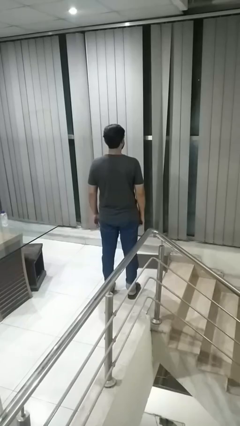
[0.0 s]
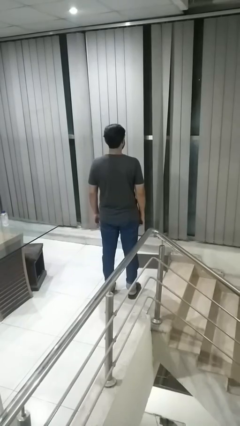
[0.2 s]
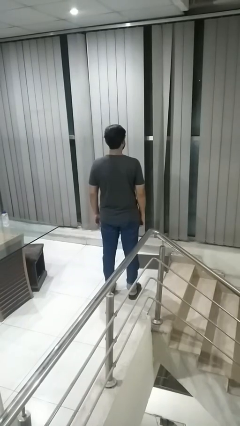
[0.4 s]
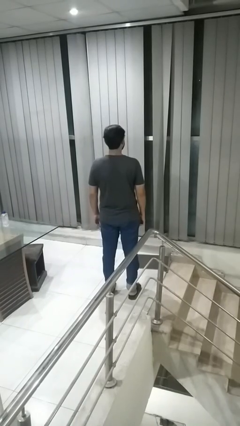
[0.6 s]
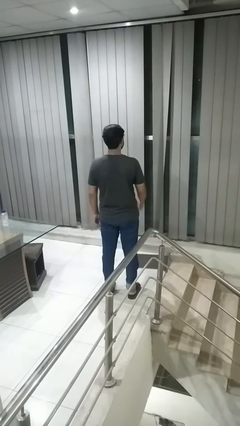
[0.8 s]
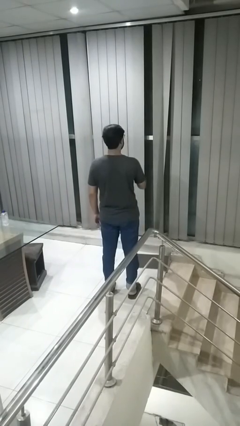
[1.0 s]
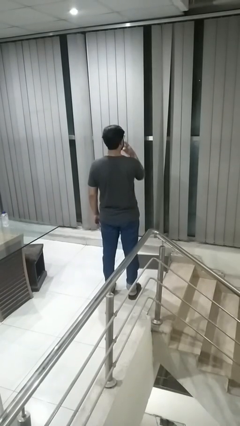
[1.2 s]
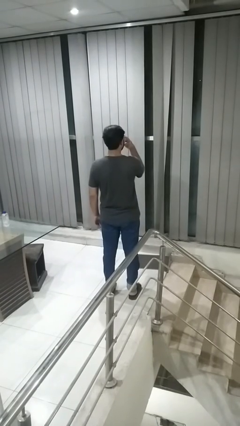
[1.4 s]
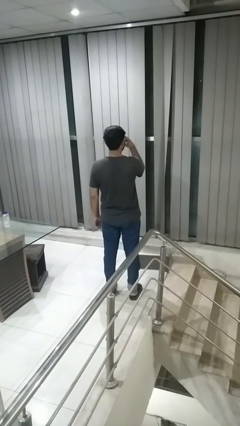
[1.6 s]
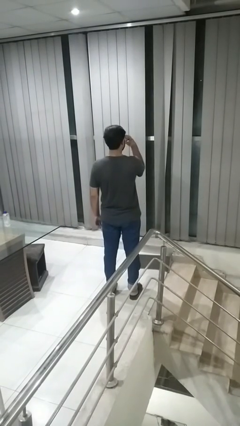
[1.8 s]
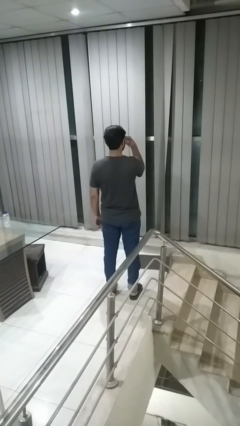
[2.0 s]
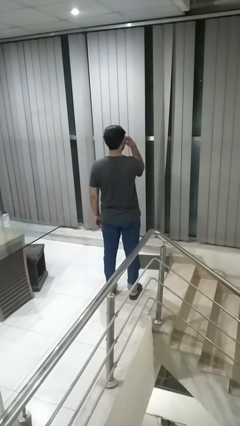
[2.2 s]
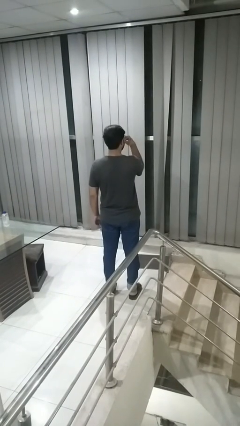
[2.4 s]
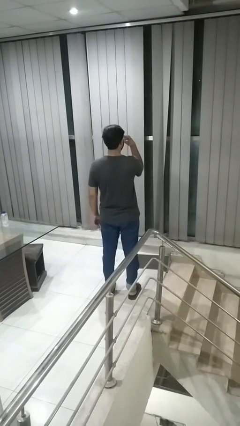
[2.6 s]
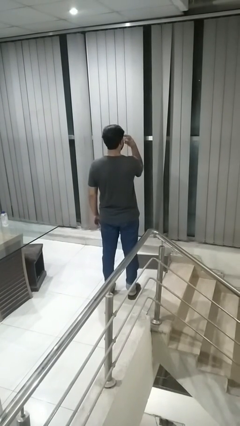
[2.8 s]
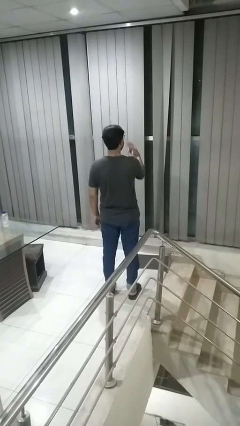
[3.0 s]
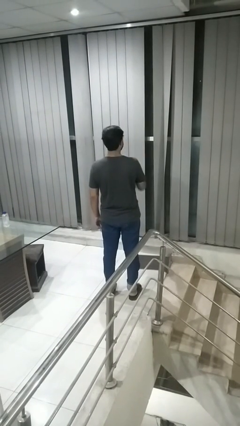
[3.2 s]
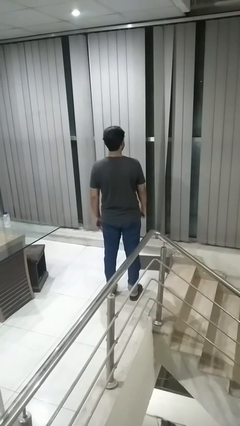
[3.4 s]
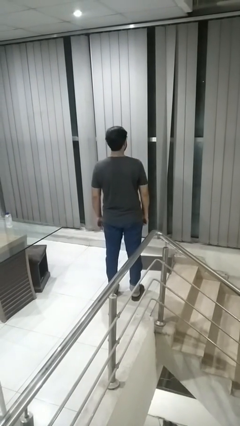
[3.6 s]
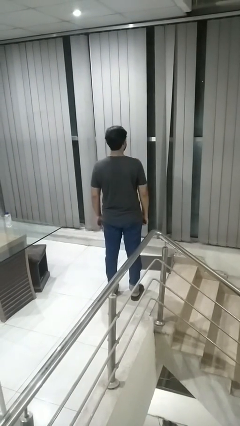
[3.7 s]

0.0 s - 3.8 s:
person gestures watch closely

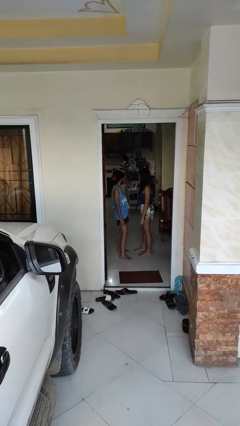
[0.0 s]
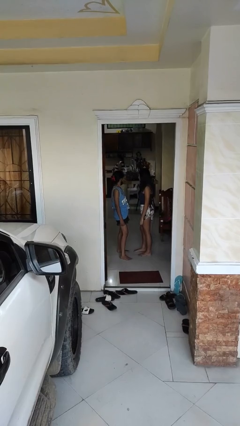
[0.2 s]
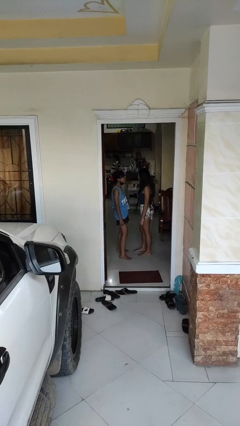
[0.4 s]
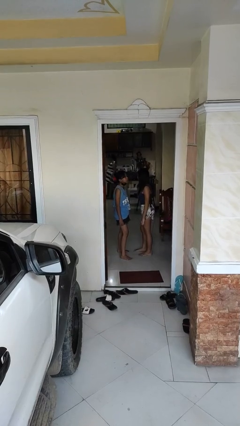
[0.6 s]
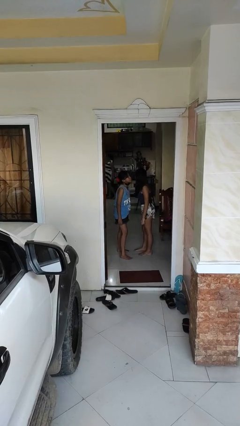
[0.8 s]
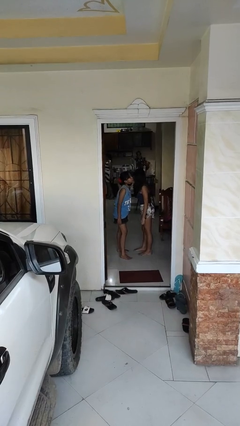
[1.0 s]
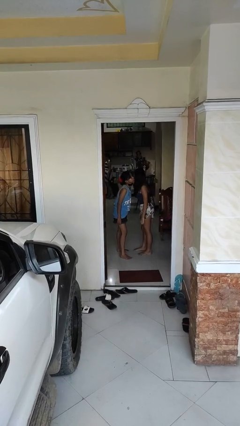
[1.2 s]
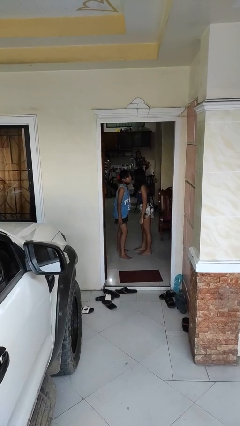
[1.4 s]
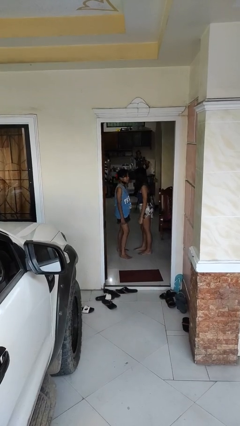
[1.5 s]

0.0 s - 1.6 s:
person kisses cheek of person

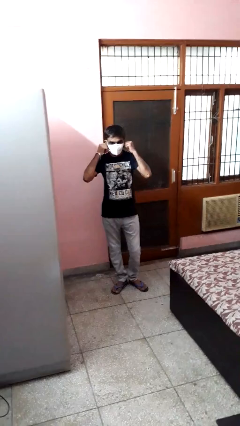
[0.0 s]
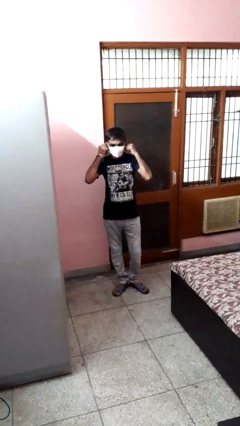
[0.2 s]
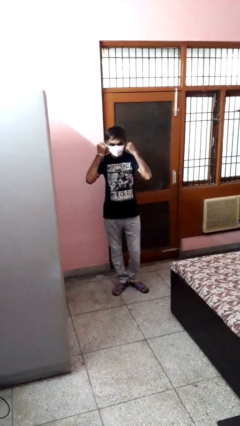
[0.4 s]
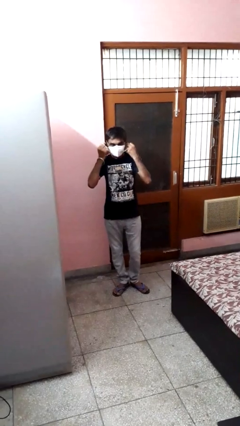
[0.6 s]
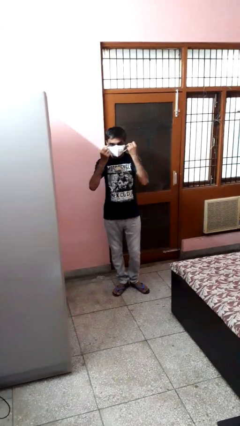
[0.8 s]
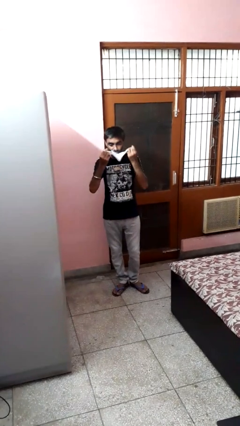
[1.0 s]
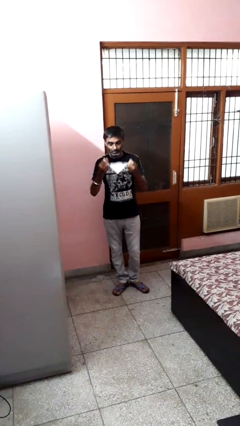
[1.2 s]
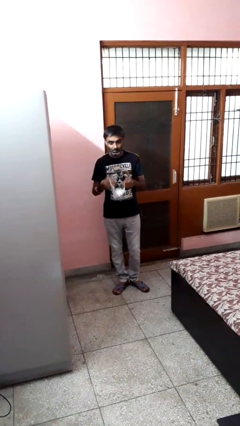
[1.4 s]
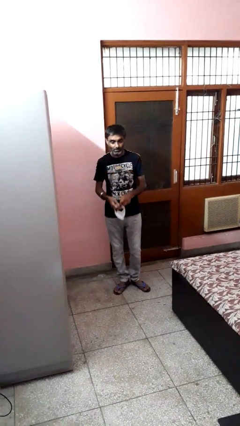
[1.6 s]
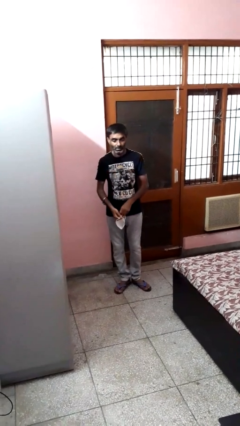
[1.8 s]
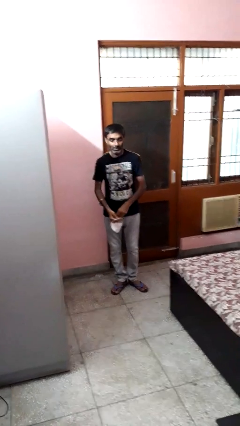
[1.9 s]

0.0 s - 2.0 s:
person takes off facemask

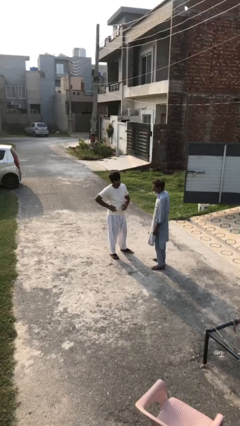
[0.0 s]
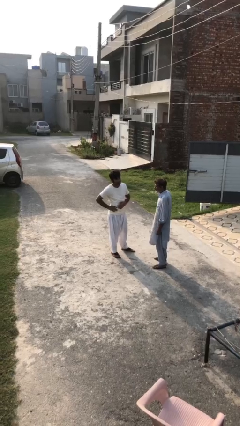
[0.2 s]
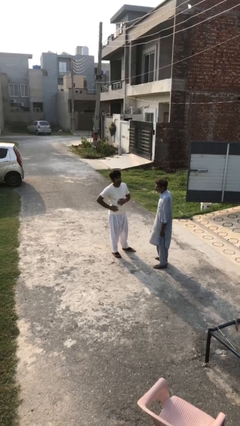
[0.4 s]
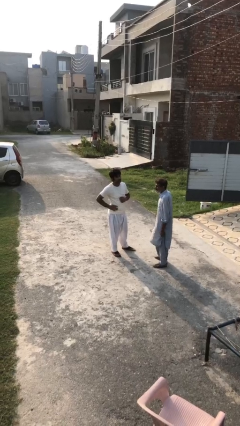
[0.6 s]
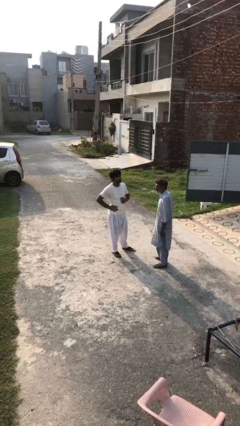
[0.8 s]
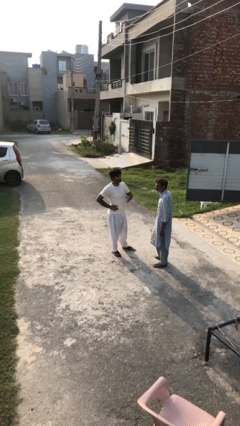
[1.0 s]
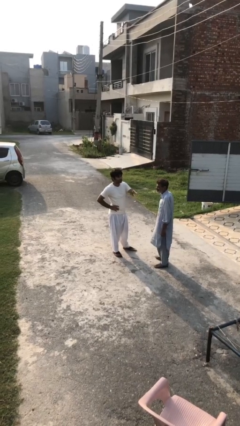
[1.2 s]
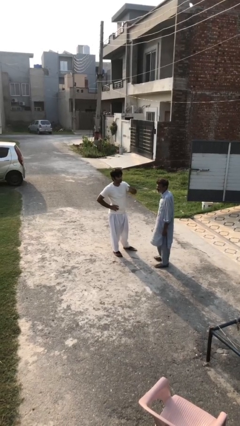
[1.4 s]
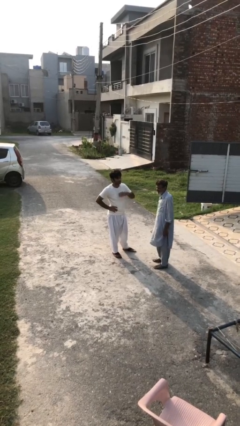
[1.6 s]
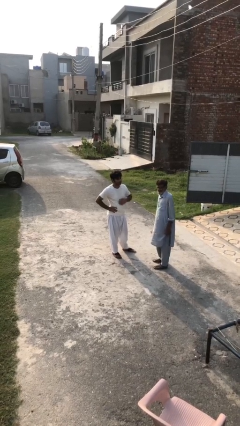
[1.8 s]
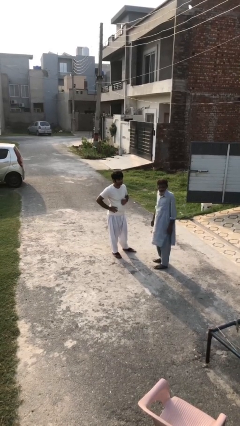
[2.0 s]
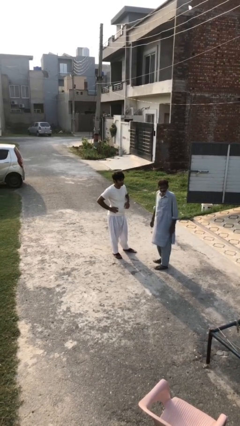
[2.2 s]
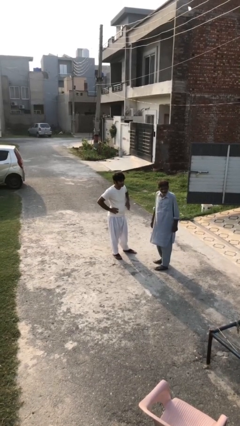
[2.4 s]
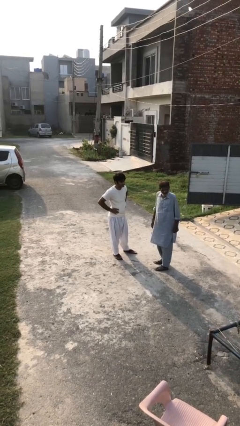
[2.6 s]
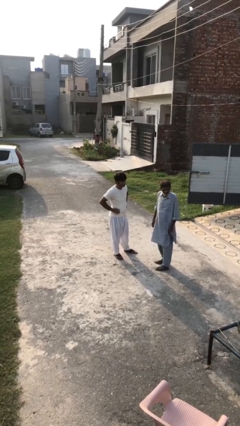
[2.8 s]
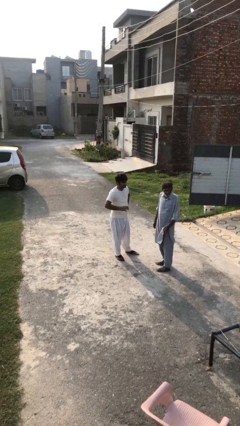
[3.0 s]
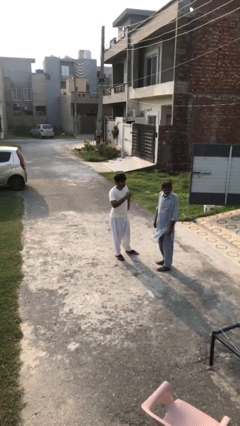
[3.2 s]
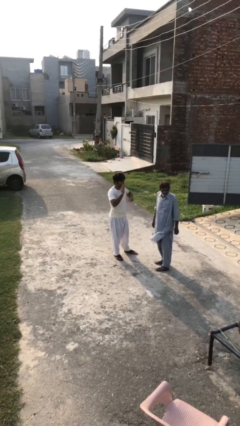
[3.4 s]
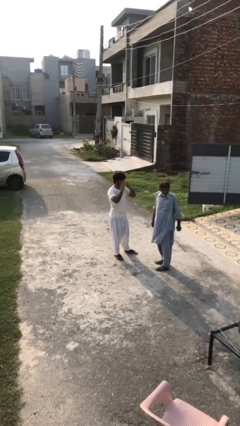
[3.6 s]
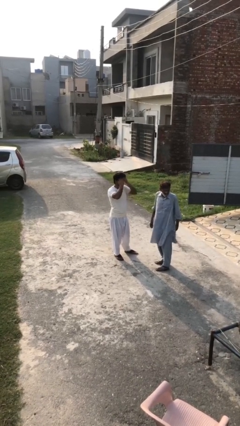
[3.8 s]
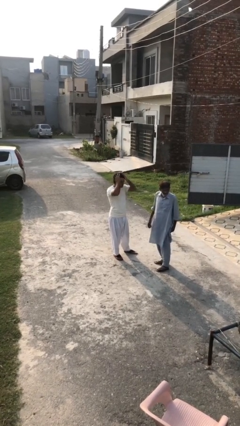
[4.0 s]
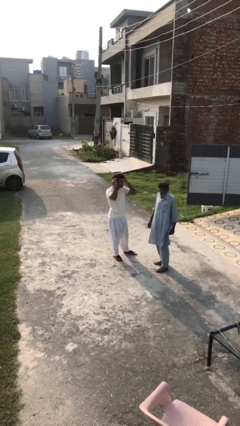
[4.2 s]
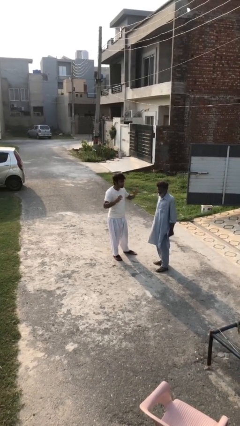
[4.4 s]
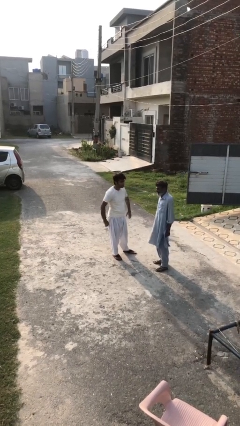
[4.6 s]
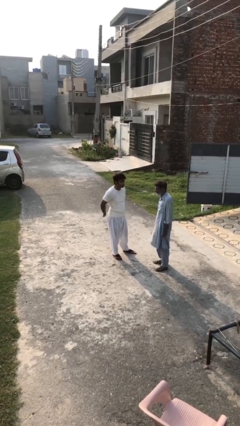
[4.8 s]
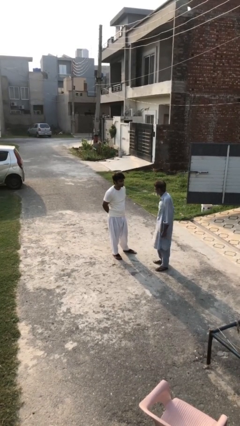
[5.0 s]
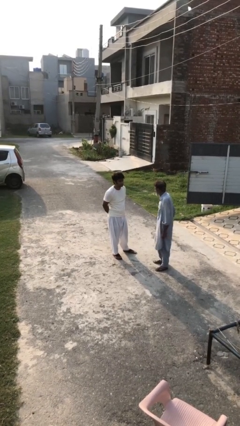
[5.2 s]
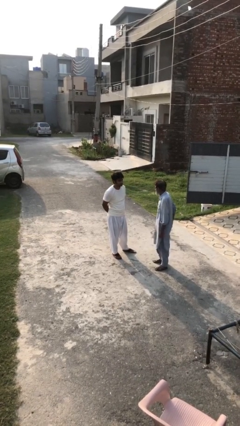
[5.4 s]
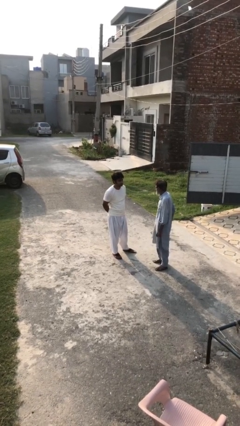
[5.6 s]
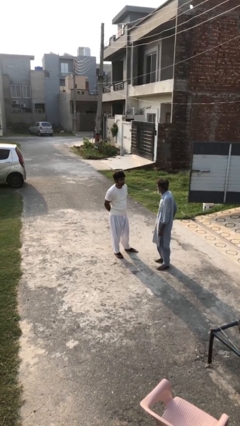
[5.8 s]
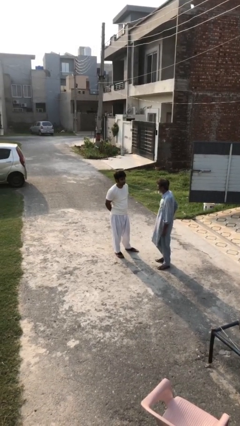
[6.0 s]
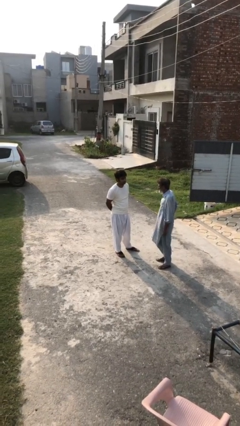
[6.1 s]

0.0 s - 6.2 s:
person talks to person

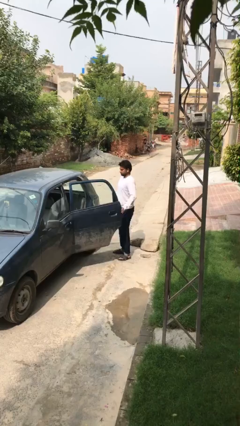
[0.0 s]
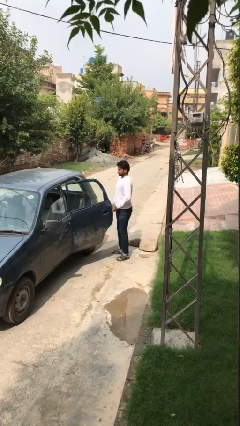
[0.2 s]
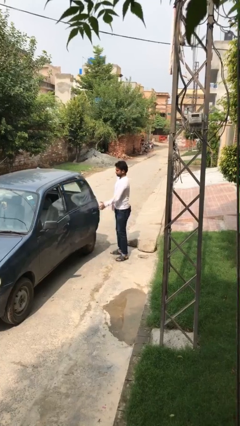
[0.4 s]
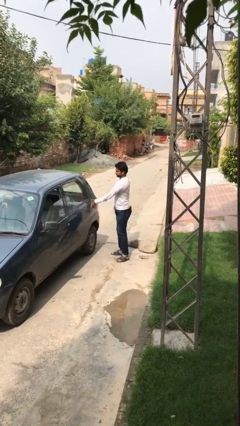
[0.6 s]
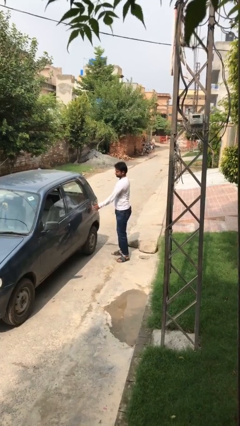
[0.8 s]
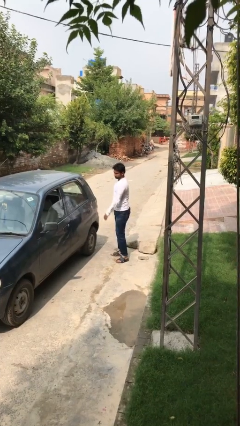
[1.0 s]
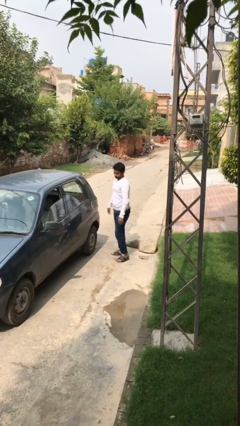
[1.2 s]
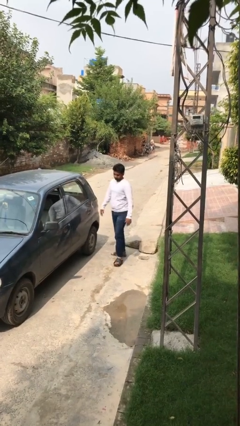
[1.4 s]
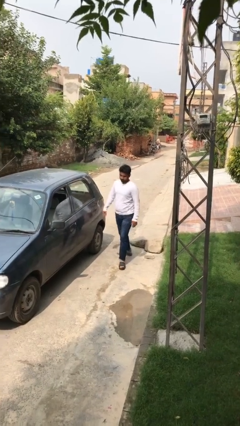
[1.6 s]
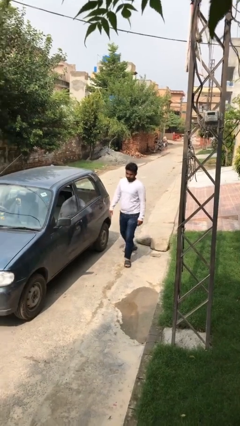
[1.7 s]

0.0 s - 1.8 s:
person closes car door

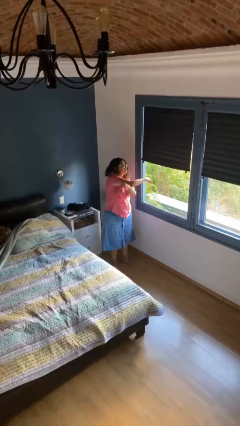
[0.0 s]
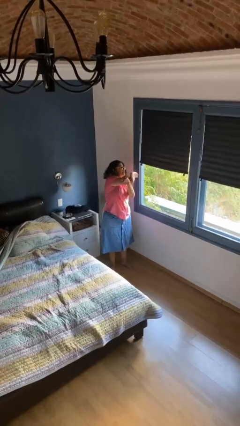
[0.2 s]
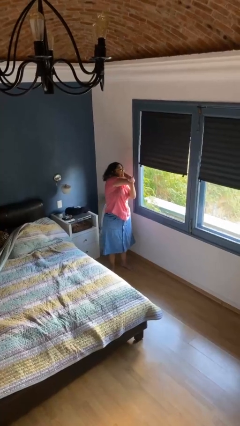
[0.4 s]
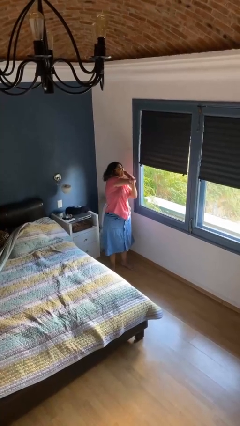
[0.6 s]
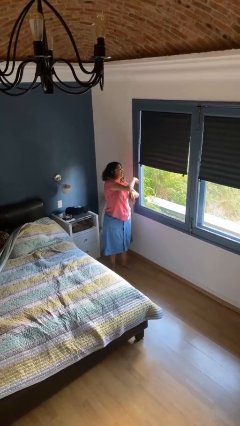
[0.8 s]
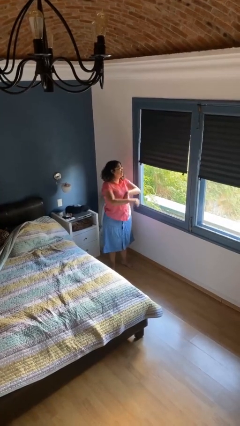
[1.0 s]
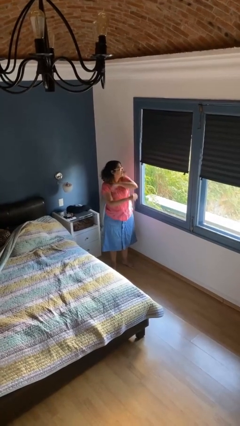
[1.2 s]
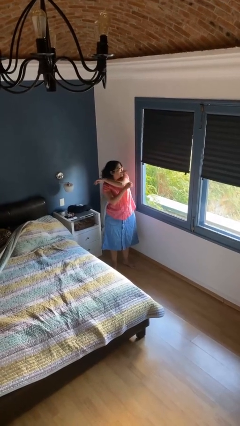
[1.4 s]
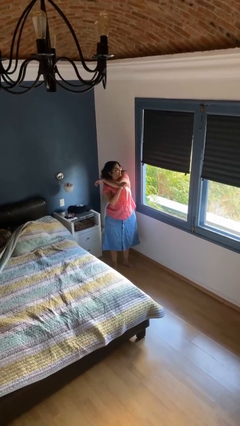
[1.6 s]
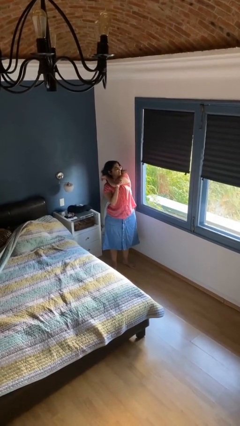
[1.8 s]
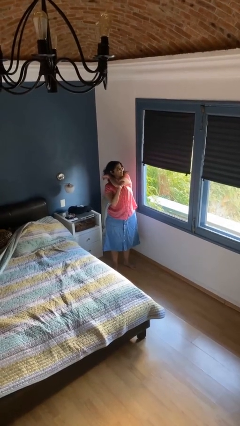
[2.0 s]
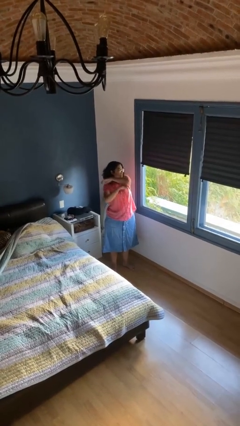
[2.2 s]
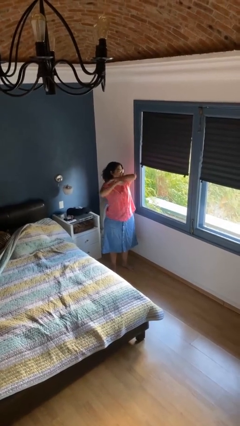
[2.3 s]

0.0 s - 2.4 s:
person stretches arms to side
